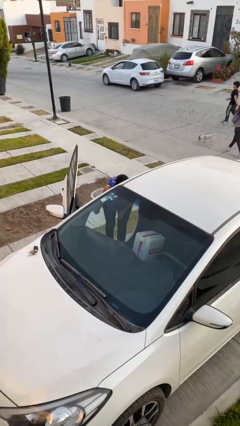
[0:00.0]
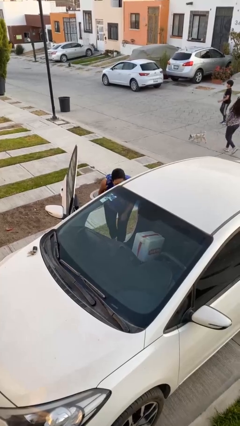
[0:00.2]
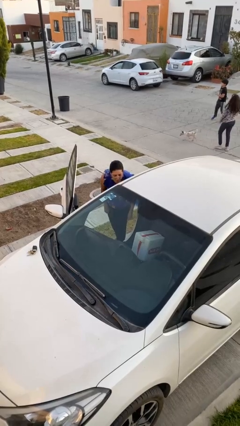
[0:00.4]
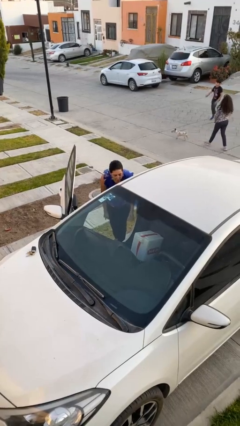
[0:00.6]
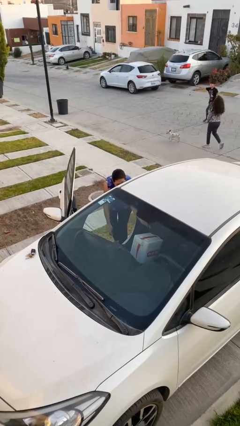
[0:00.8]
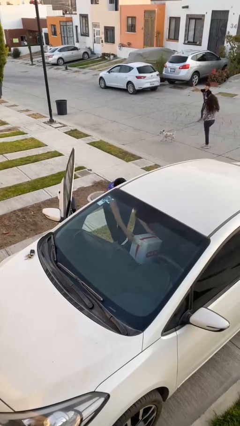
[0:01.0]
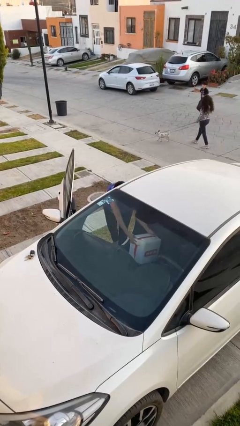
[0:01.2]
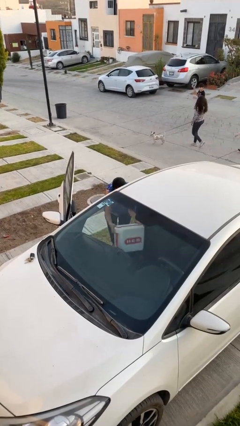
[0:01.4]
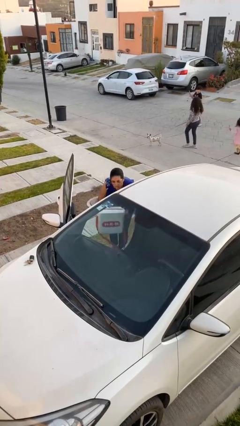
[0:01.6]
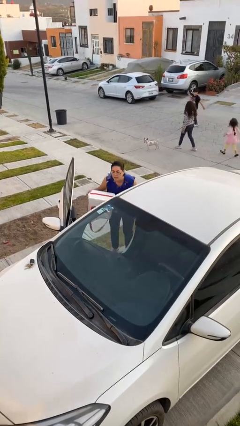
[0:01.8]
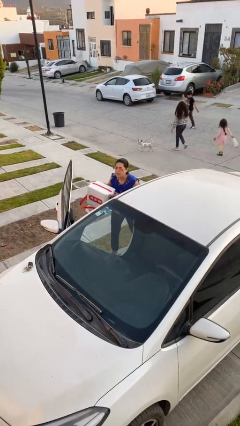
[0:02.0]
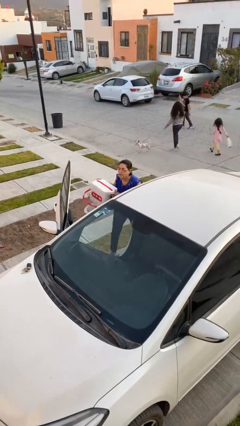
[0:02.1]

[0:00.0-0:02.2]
person unloads car

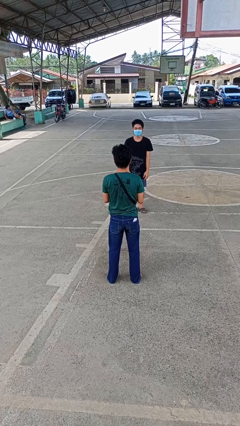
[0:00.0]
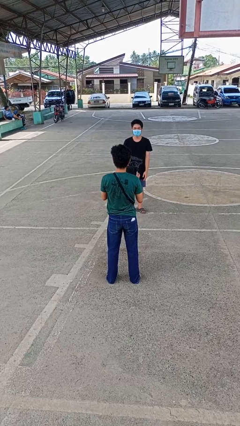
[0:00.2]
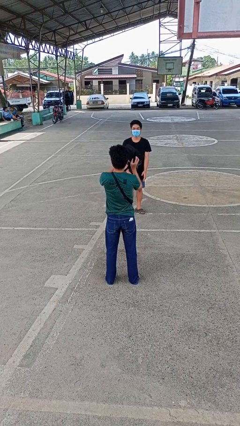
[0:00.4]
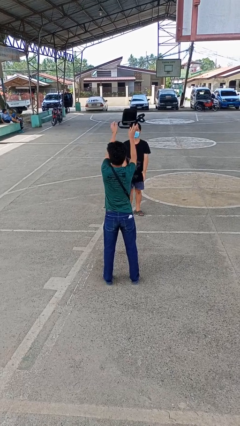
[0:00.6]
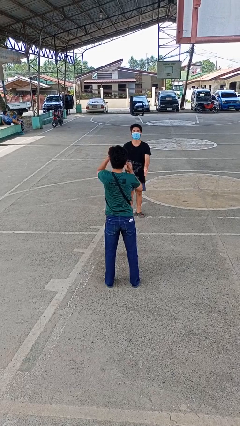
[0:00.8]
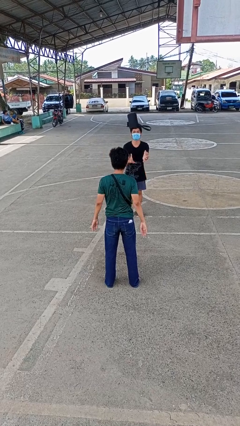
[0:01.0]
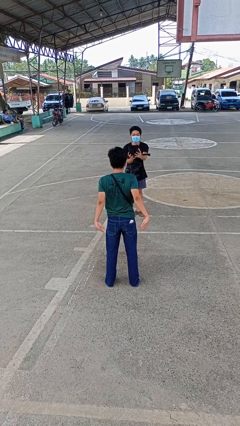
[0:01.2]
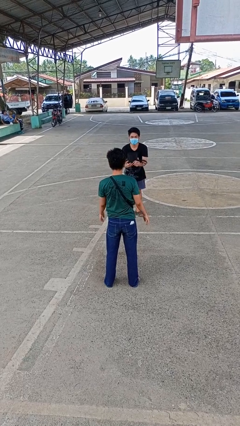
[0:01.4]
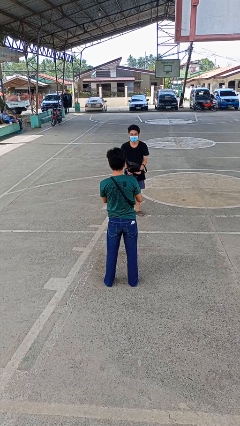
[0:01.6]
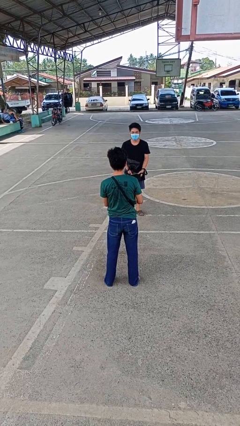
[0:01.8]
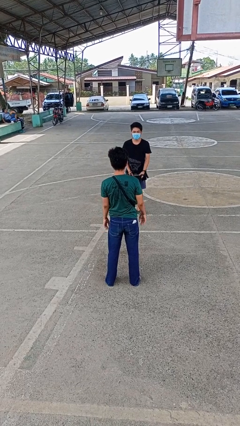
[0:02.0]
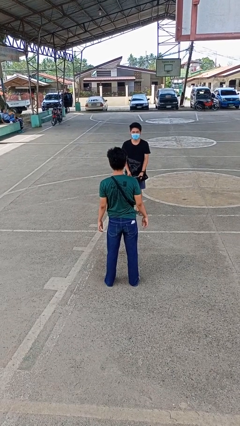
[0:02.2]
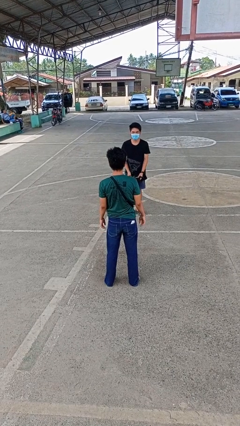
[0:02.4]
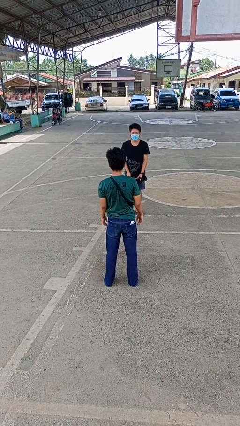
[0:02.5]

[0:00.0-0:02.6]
person throws object to person

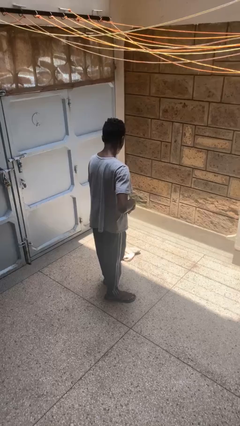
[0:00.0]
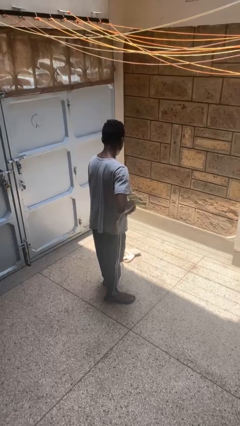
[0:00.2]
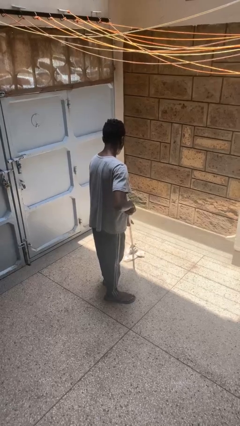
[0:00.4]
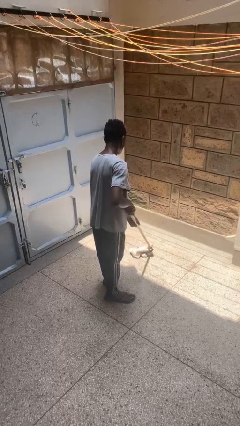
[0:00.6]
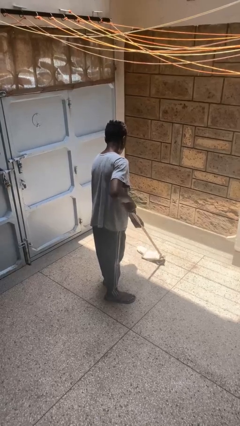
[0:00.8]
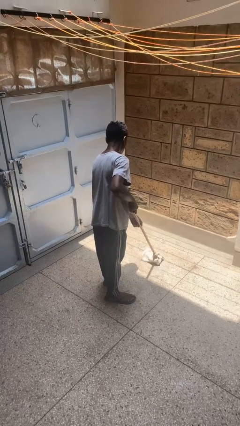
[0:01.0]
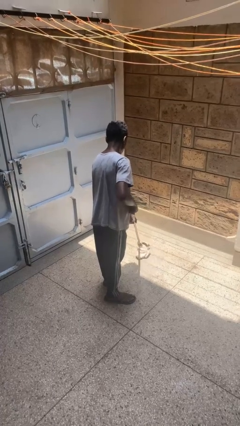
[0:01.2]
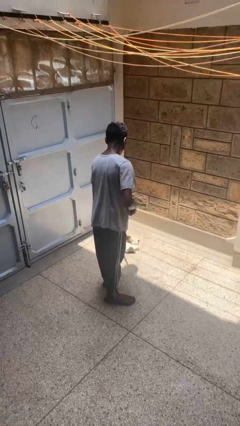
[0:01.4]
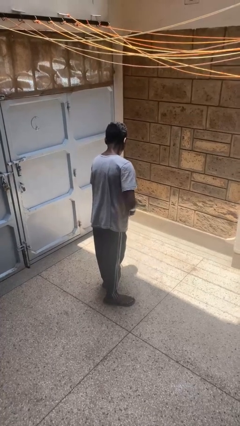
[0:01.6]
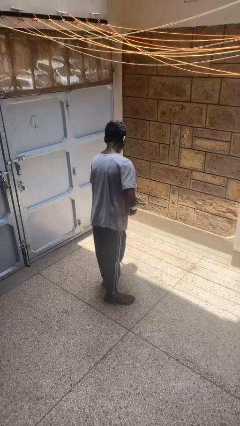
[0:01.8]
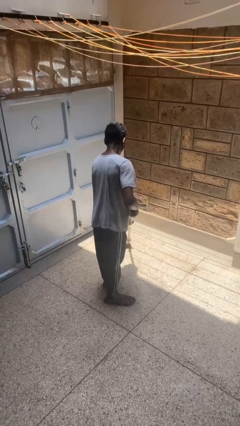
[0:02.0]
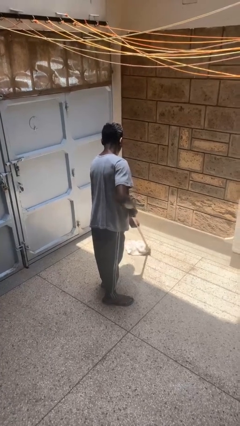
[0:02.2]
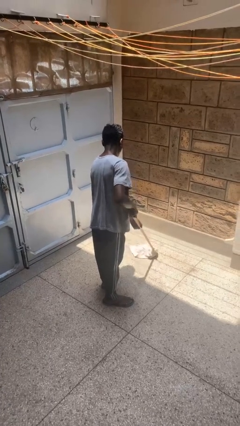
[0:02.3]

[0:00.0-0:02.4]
person mops

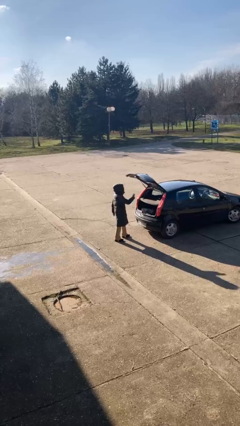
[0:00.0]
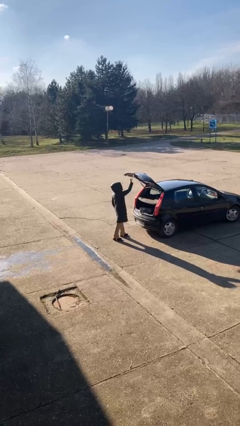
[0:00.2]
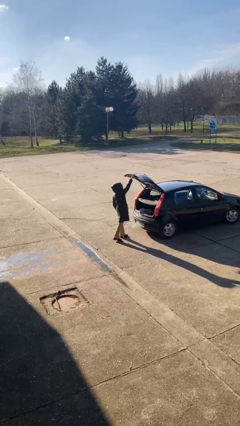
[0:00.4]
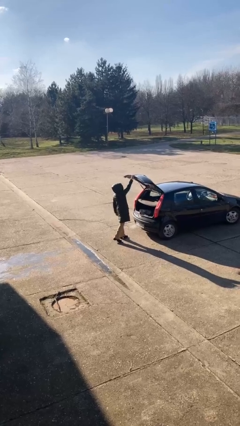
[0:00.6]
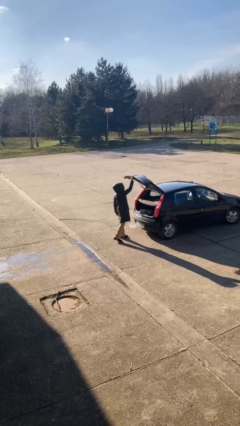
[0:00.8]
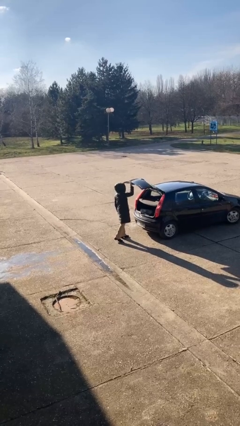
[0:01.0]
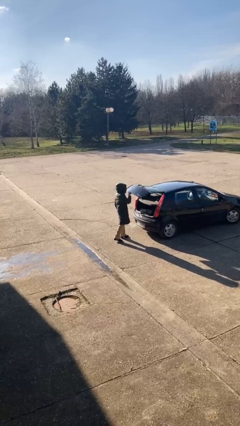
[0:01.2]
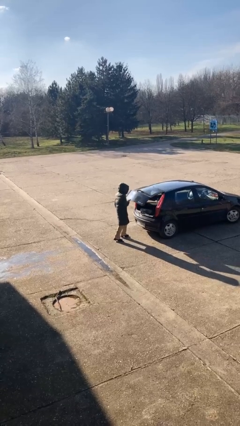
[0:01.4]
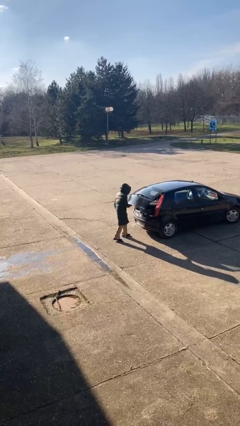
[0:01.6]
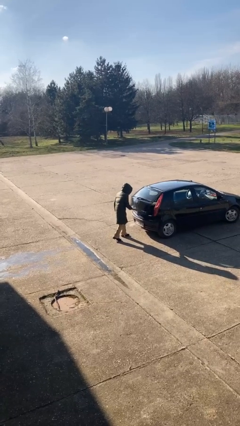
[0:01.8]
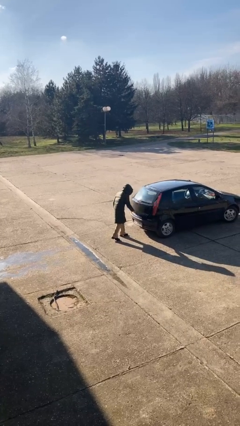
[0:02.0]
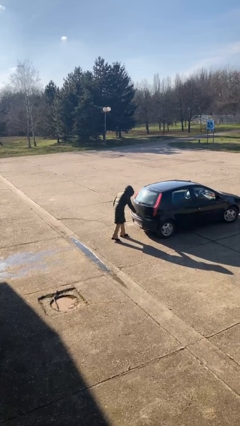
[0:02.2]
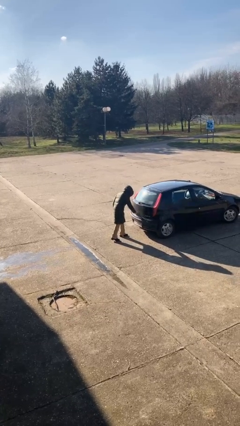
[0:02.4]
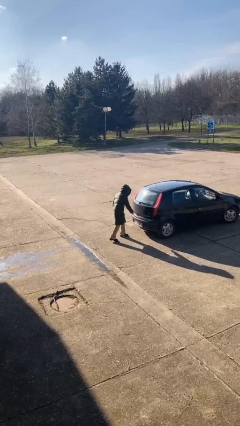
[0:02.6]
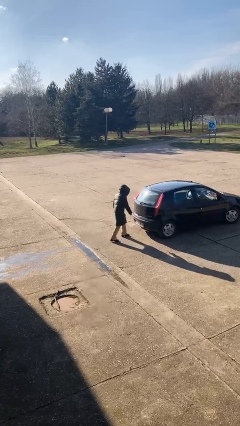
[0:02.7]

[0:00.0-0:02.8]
person closes car trunk

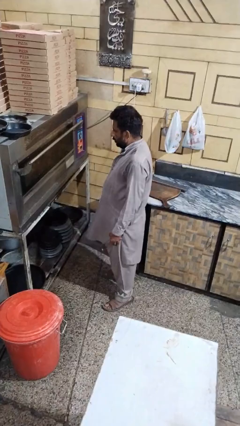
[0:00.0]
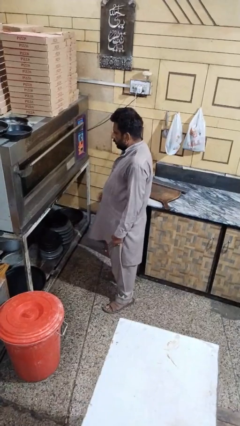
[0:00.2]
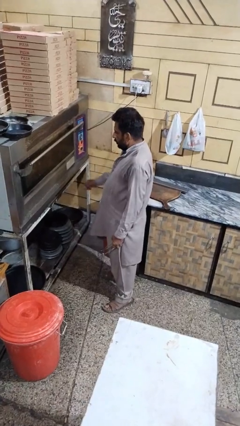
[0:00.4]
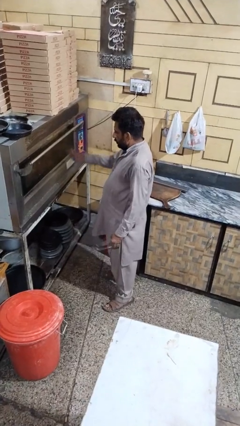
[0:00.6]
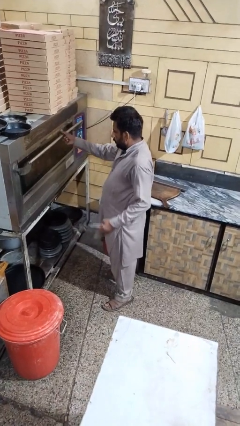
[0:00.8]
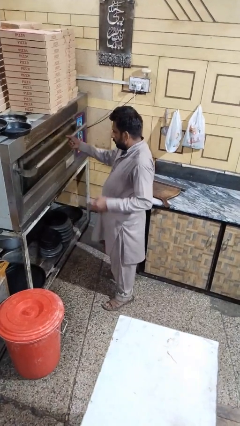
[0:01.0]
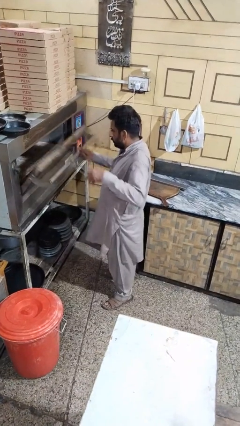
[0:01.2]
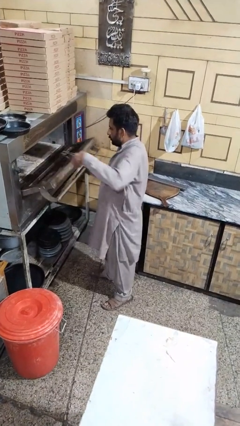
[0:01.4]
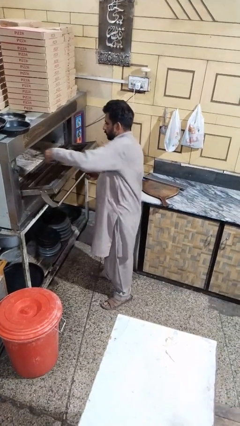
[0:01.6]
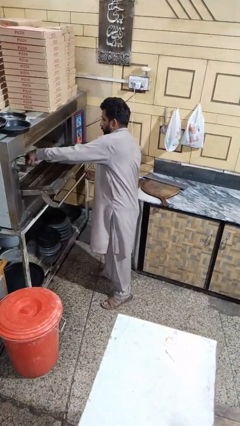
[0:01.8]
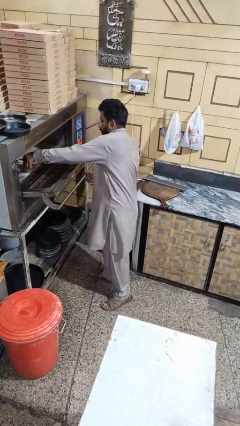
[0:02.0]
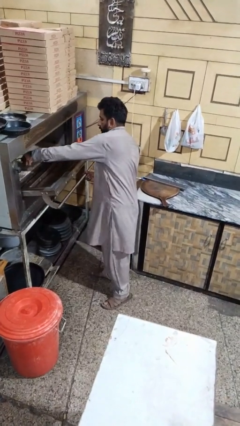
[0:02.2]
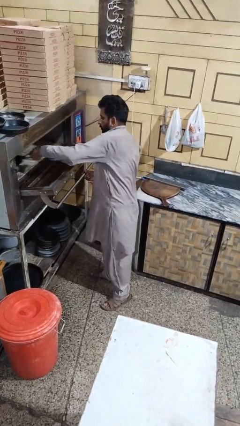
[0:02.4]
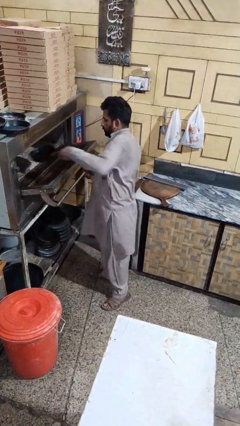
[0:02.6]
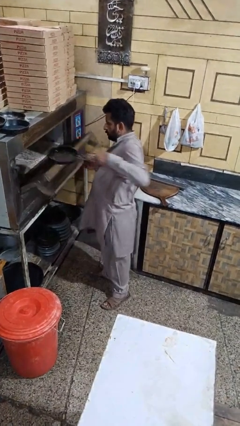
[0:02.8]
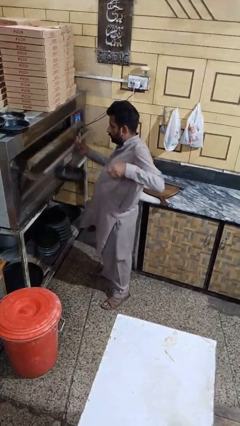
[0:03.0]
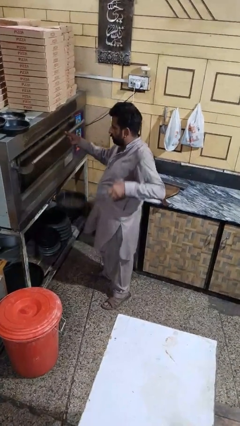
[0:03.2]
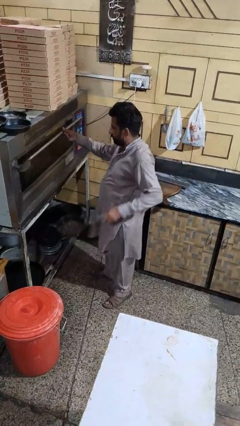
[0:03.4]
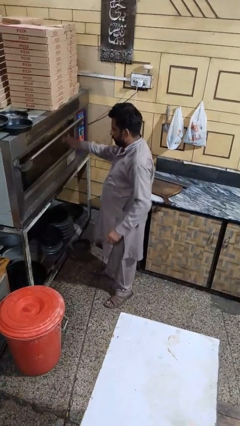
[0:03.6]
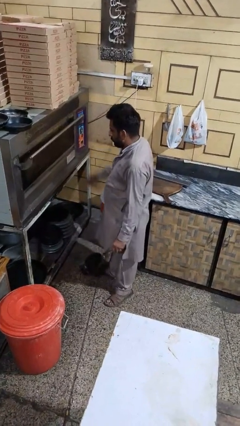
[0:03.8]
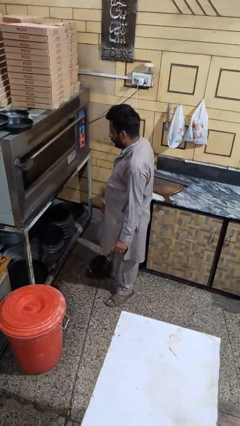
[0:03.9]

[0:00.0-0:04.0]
person takes object from microwave

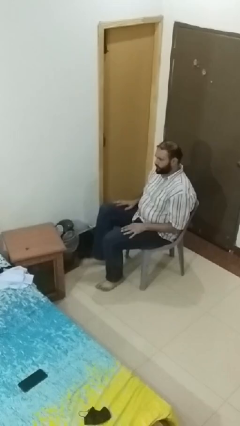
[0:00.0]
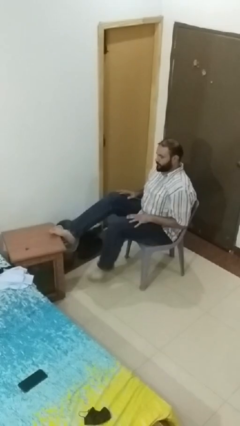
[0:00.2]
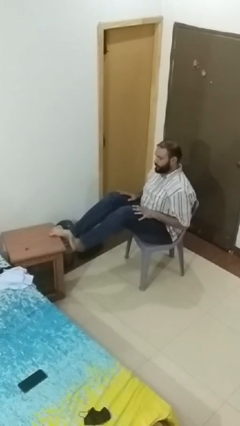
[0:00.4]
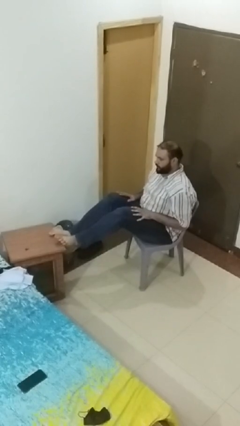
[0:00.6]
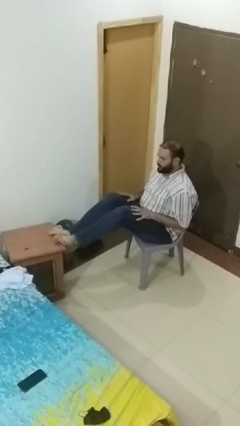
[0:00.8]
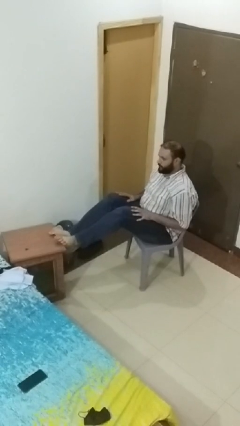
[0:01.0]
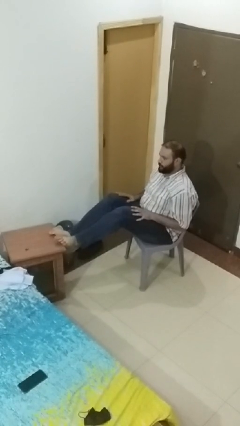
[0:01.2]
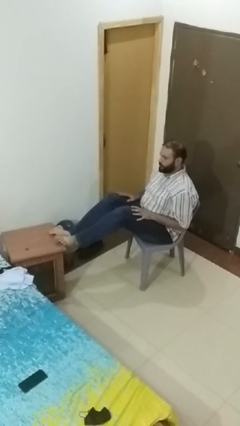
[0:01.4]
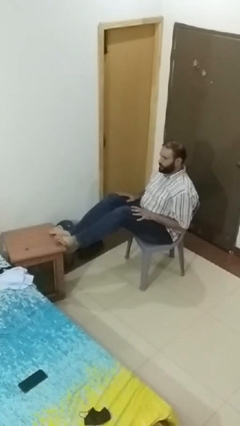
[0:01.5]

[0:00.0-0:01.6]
person puts feet up

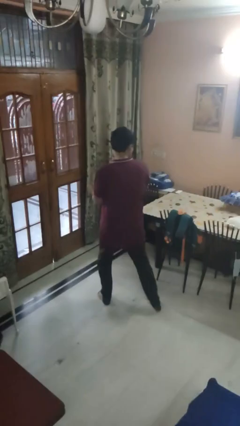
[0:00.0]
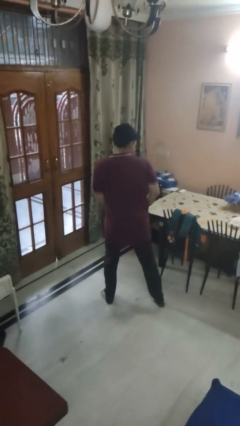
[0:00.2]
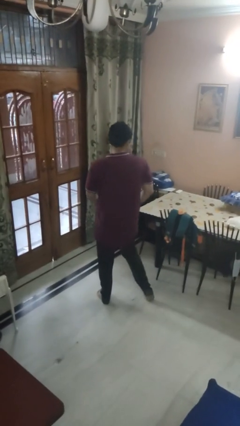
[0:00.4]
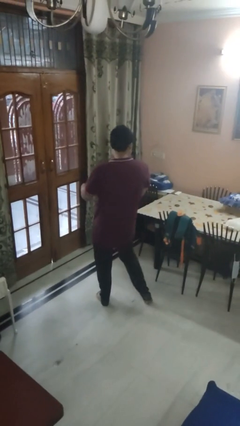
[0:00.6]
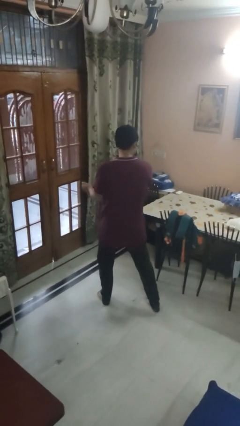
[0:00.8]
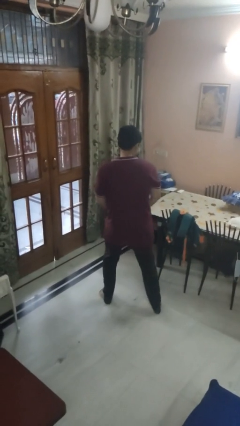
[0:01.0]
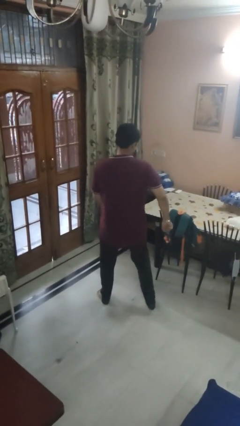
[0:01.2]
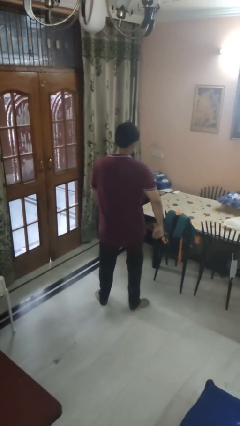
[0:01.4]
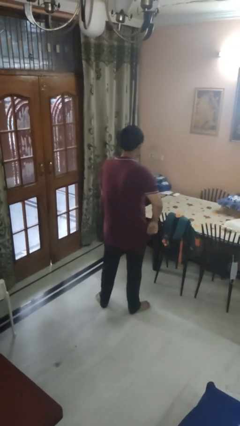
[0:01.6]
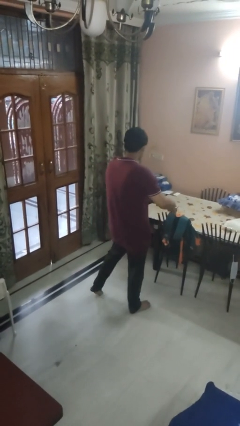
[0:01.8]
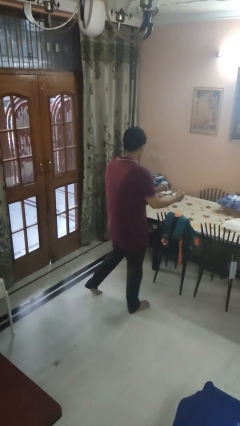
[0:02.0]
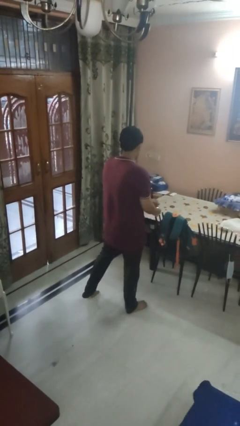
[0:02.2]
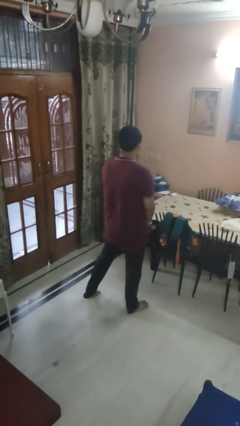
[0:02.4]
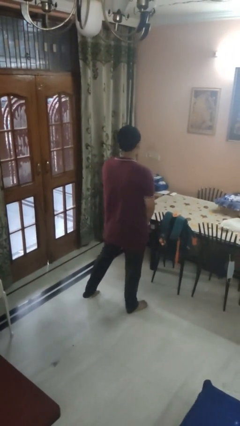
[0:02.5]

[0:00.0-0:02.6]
person dances in place
